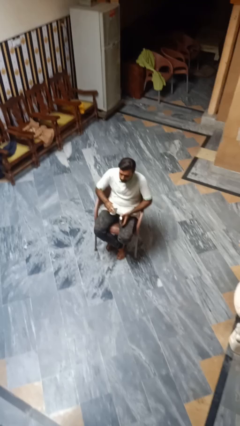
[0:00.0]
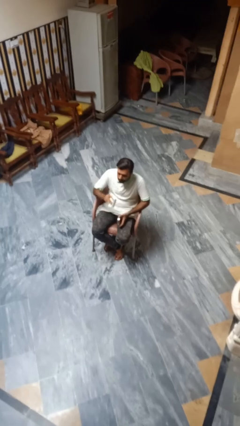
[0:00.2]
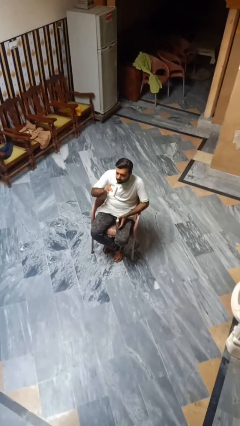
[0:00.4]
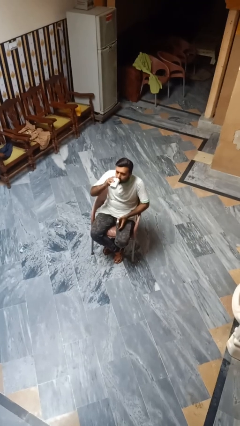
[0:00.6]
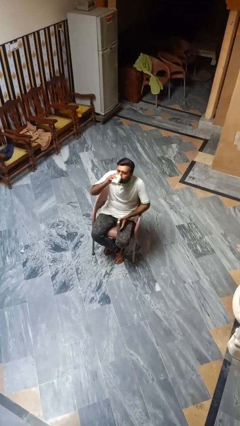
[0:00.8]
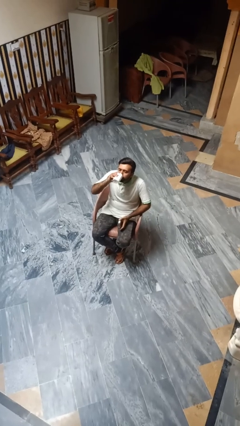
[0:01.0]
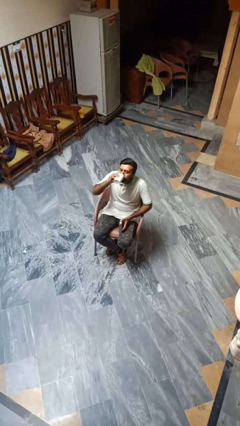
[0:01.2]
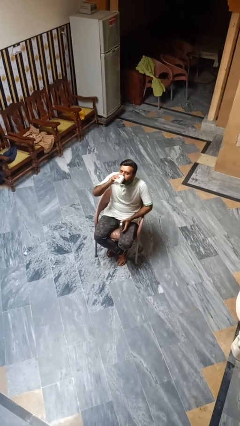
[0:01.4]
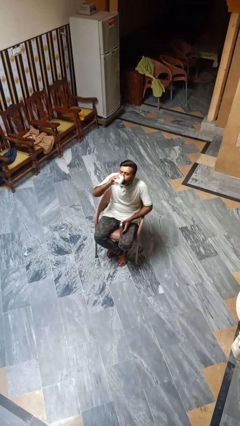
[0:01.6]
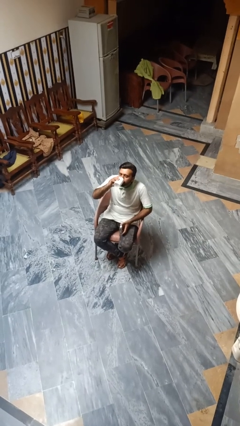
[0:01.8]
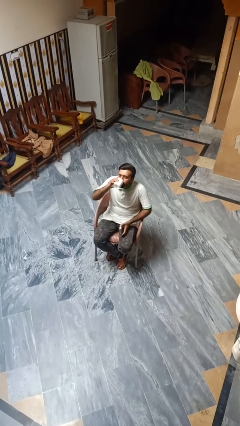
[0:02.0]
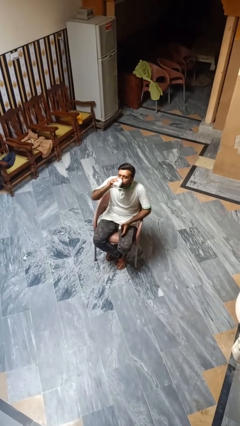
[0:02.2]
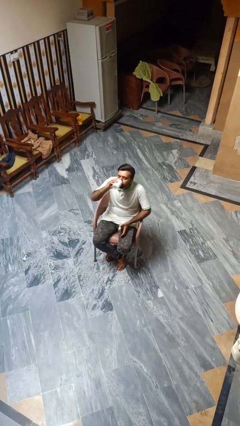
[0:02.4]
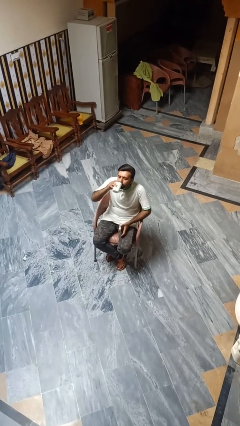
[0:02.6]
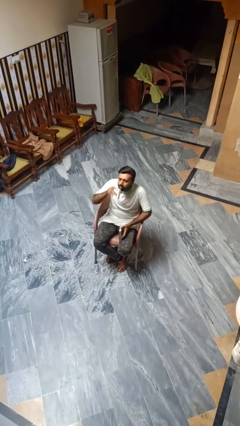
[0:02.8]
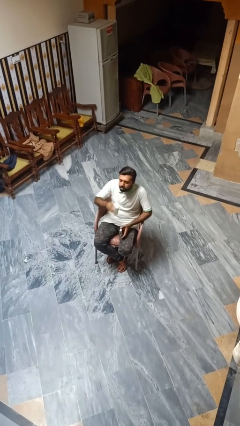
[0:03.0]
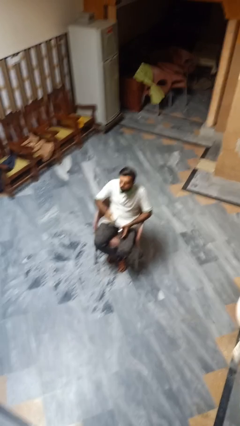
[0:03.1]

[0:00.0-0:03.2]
person drinks from beverage can

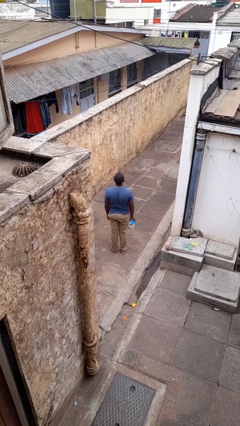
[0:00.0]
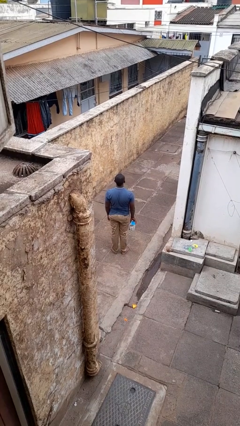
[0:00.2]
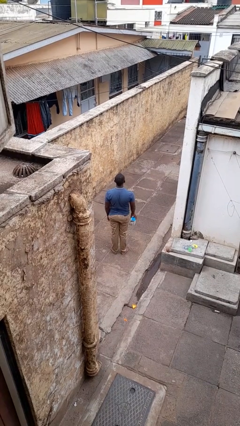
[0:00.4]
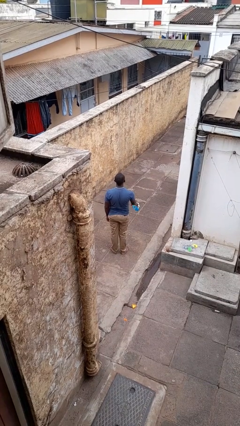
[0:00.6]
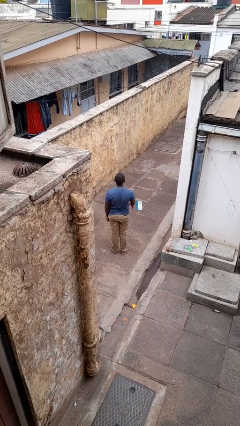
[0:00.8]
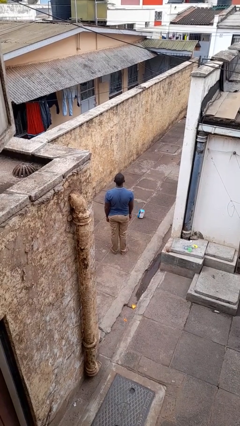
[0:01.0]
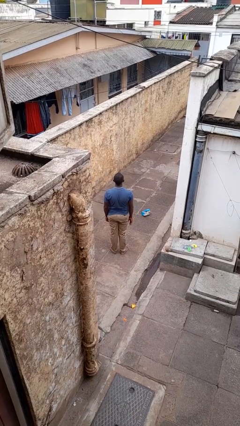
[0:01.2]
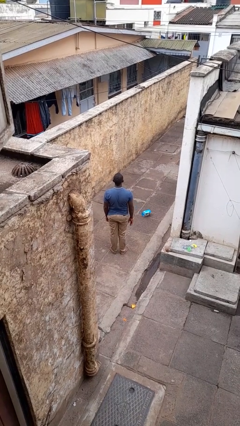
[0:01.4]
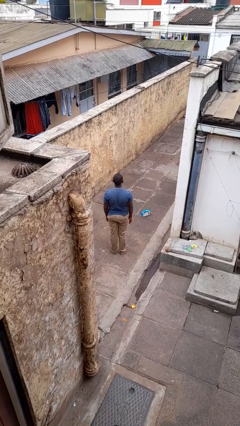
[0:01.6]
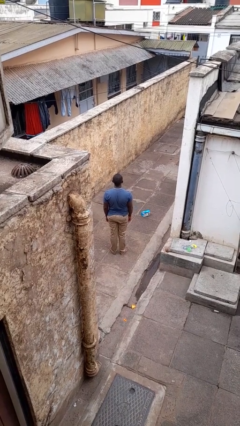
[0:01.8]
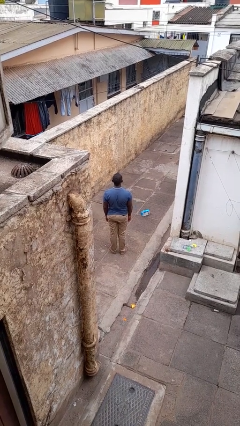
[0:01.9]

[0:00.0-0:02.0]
person throws object to ground

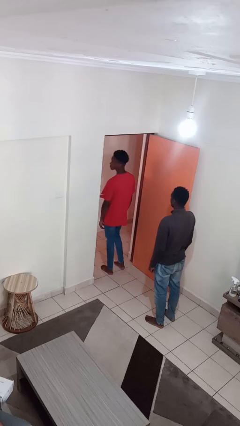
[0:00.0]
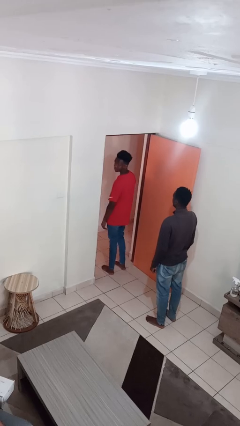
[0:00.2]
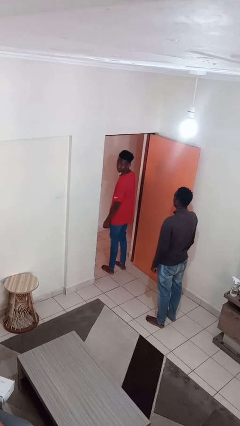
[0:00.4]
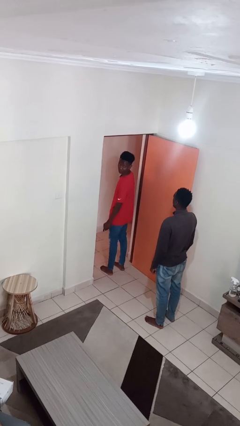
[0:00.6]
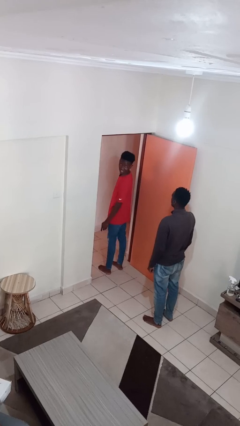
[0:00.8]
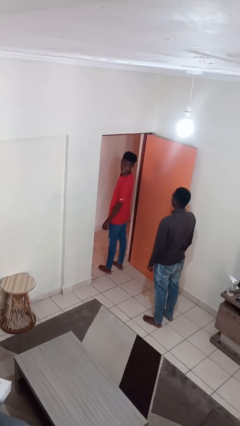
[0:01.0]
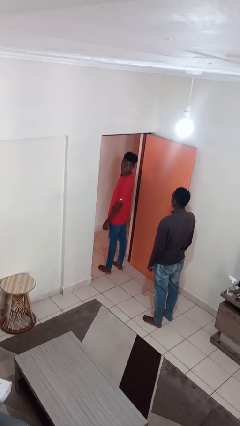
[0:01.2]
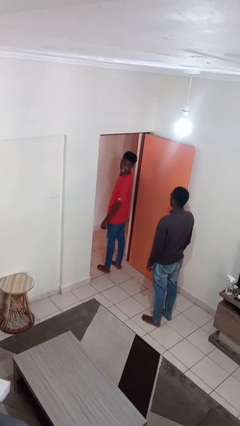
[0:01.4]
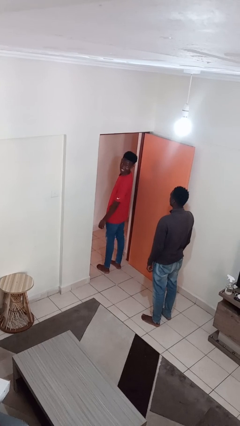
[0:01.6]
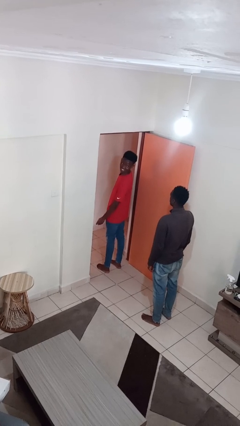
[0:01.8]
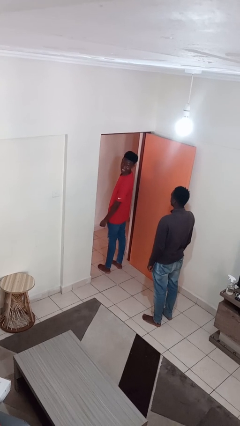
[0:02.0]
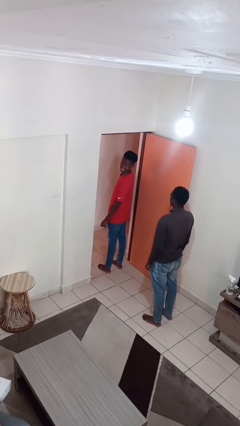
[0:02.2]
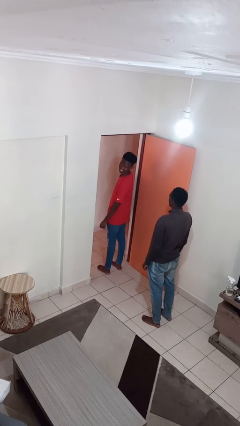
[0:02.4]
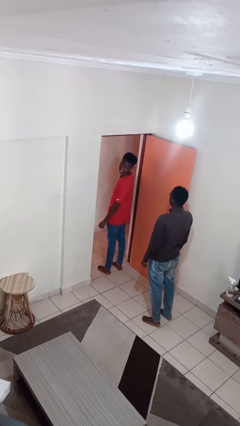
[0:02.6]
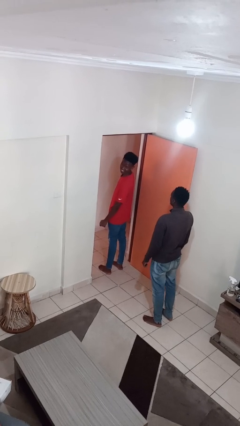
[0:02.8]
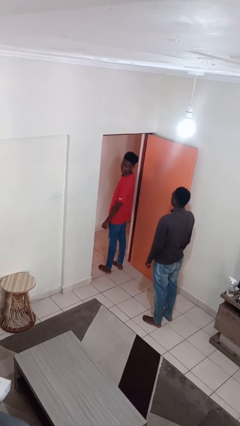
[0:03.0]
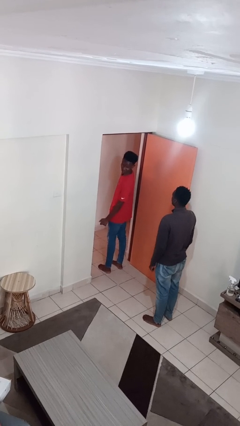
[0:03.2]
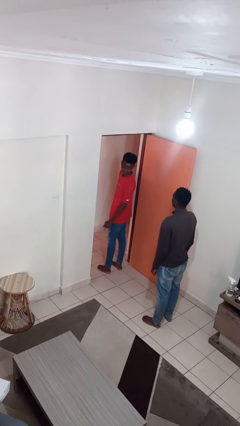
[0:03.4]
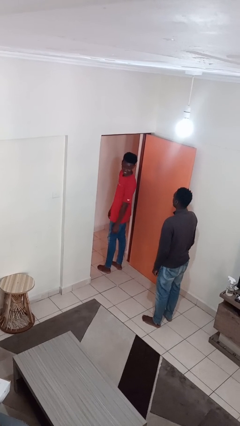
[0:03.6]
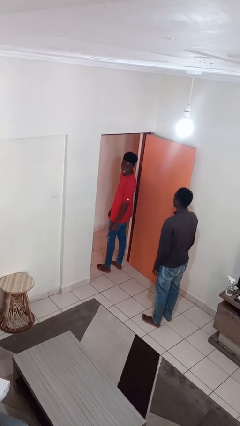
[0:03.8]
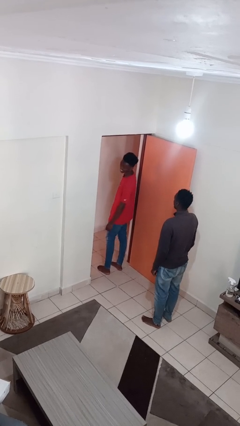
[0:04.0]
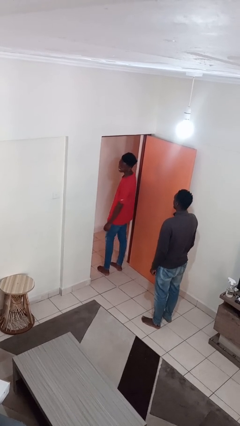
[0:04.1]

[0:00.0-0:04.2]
person looks over shoulder

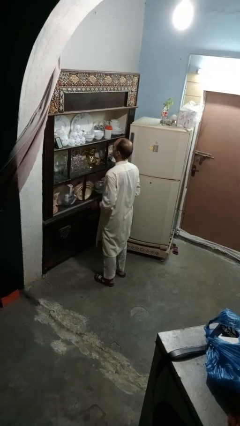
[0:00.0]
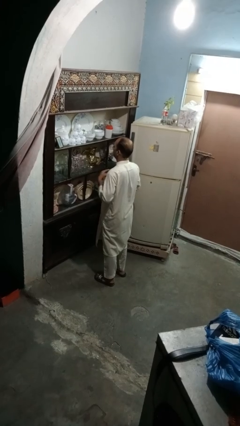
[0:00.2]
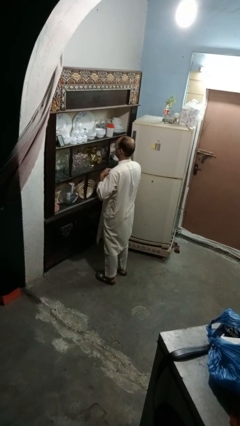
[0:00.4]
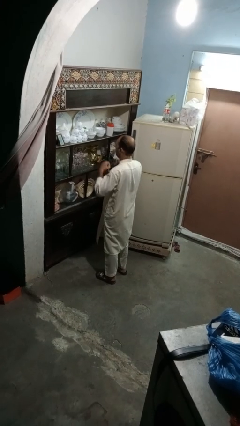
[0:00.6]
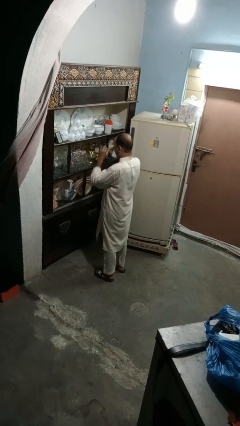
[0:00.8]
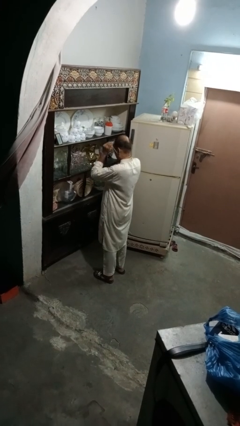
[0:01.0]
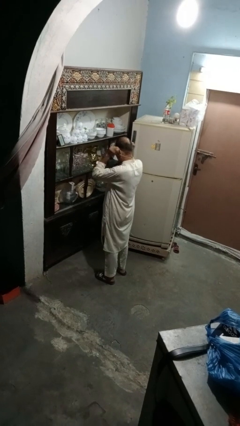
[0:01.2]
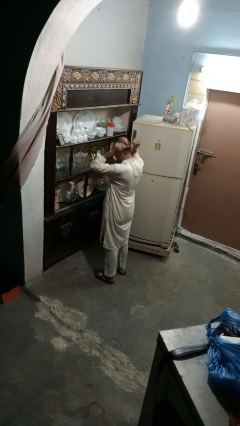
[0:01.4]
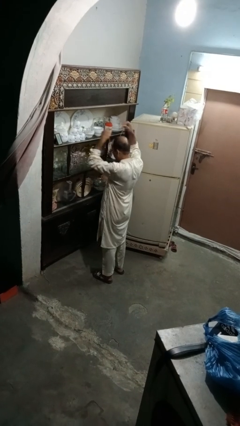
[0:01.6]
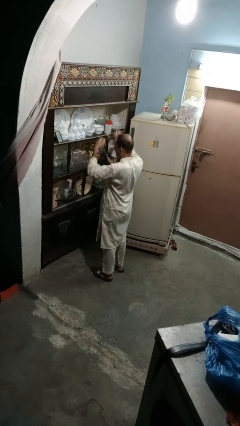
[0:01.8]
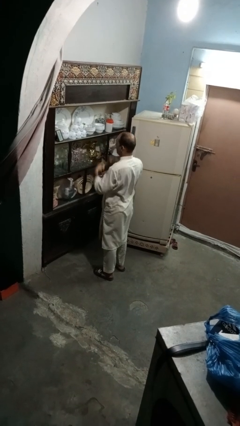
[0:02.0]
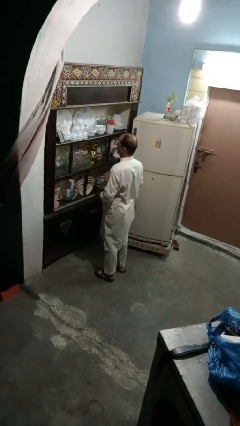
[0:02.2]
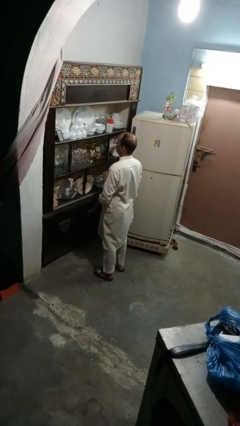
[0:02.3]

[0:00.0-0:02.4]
person takes off necklace

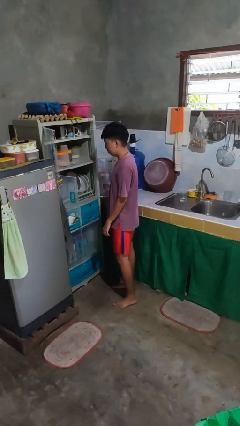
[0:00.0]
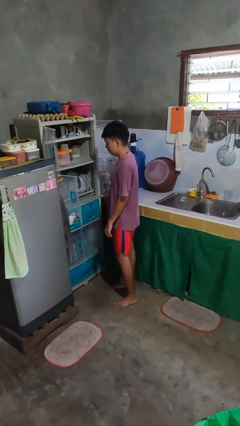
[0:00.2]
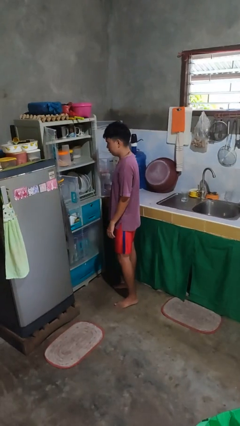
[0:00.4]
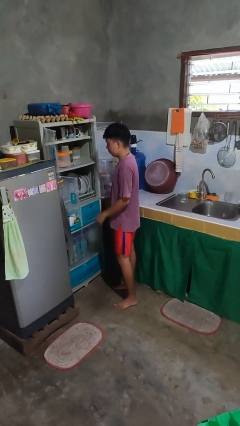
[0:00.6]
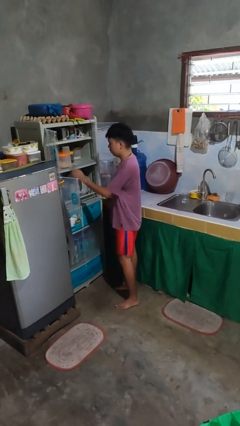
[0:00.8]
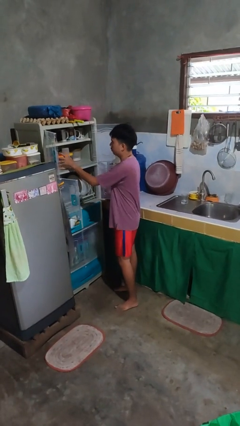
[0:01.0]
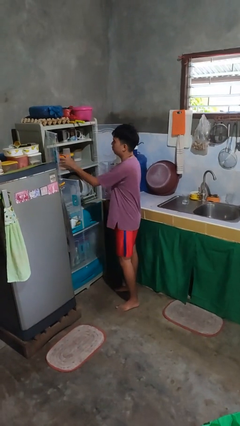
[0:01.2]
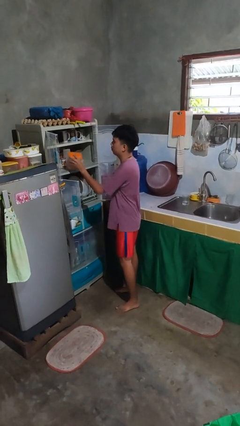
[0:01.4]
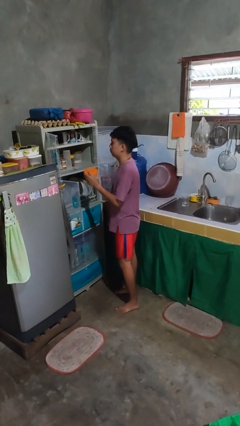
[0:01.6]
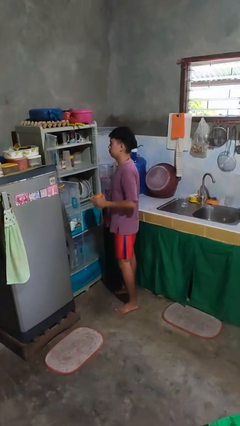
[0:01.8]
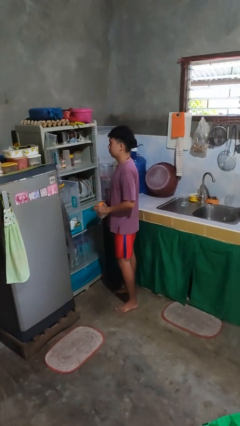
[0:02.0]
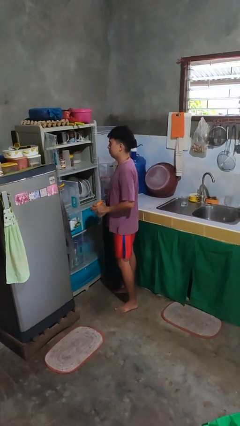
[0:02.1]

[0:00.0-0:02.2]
person takes object from cabinet

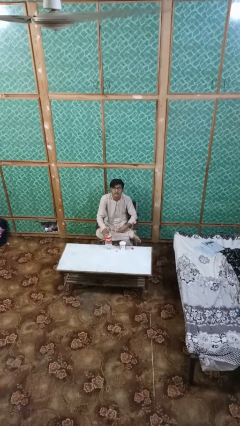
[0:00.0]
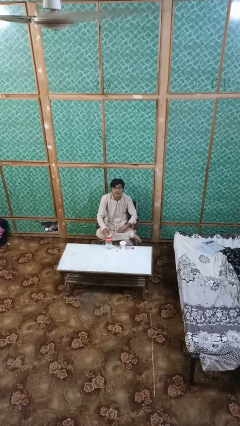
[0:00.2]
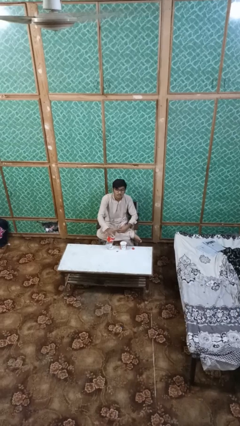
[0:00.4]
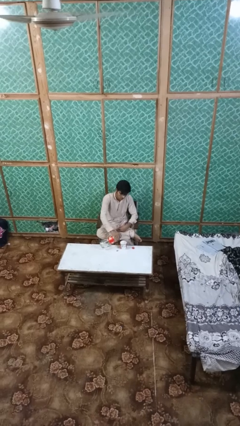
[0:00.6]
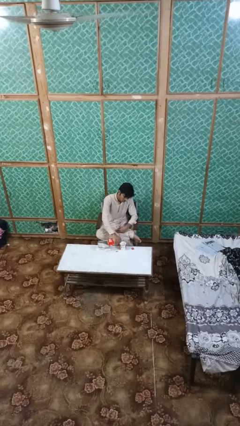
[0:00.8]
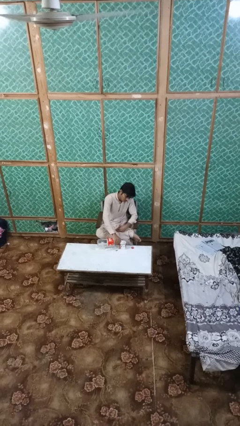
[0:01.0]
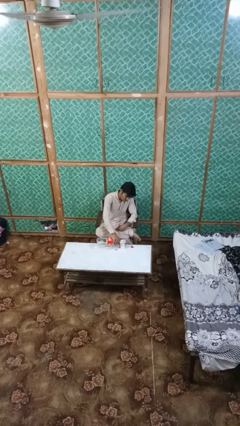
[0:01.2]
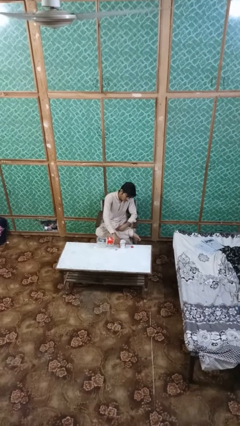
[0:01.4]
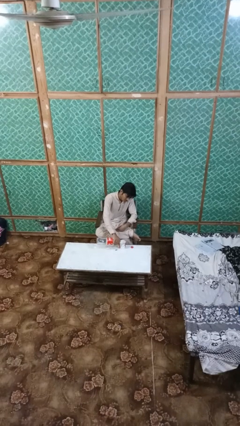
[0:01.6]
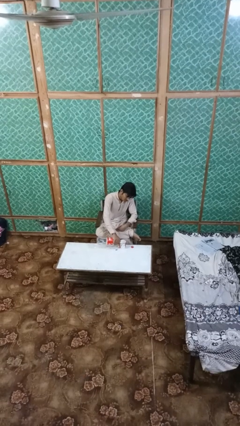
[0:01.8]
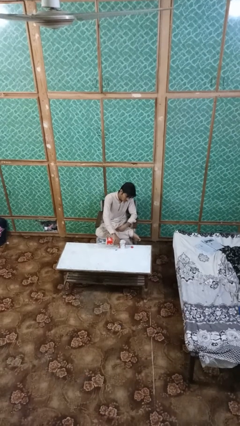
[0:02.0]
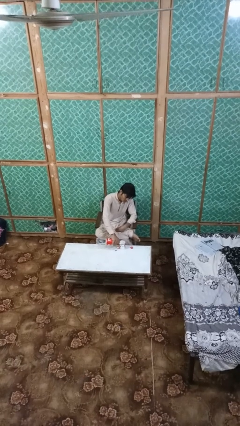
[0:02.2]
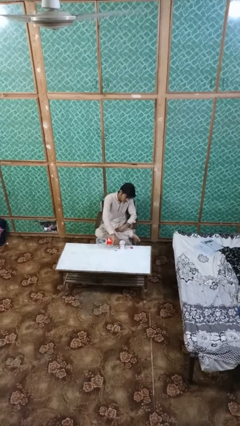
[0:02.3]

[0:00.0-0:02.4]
person pours liquid into cup

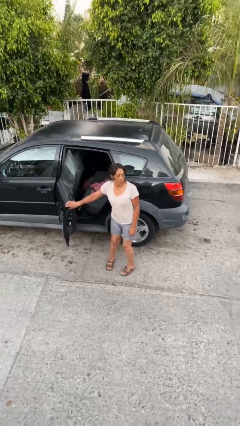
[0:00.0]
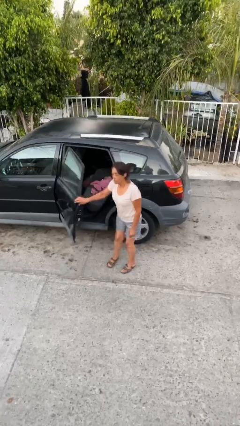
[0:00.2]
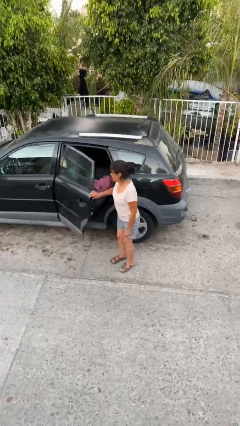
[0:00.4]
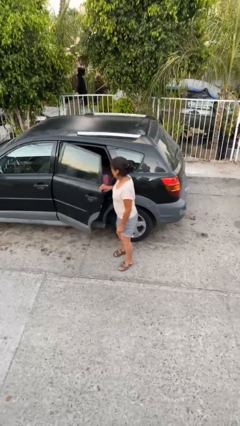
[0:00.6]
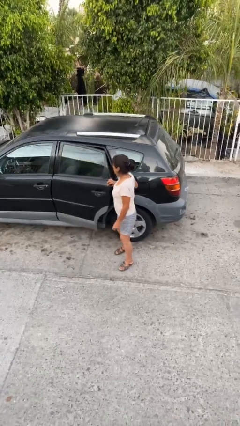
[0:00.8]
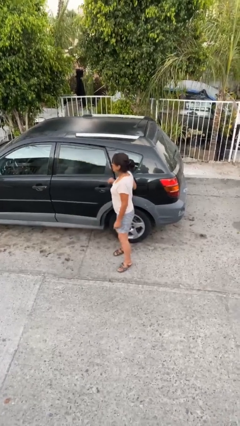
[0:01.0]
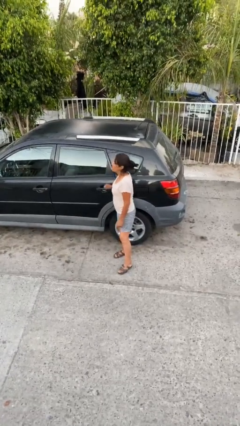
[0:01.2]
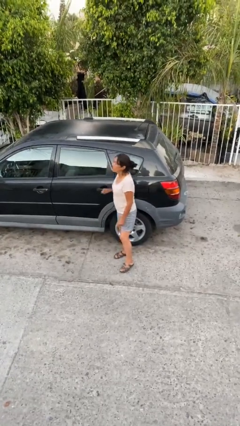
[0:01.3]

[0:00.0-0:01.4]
person closes car door
